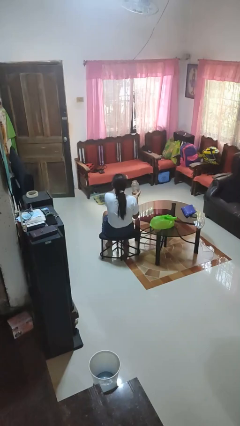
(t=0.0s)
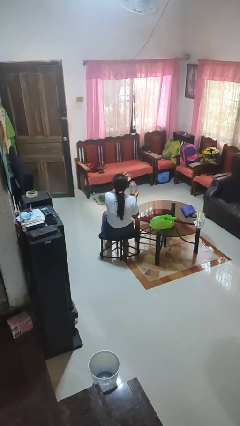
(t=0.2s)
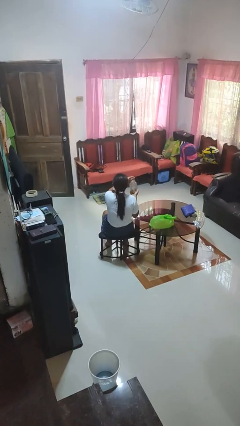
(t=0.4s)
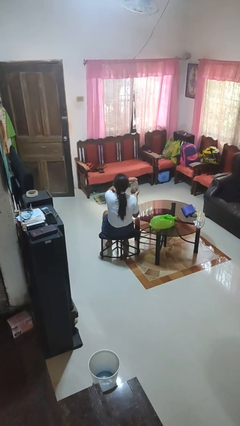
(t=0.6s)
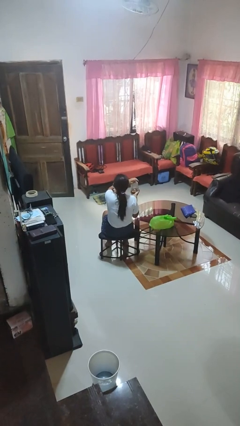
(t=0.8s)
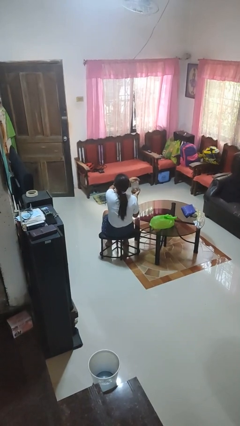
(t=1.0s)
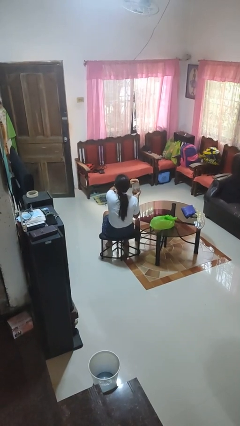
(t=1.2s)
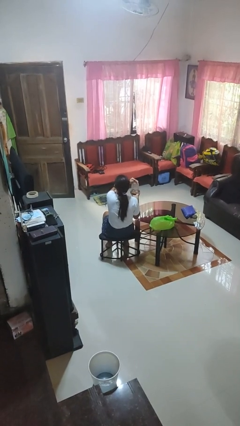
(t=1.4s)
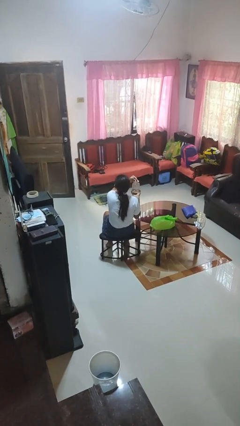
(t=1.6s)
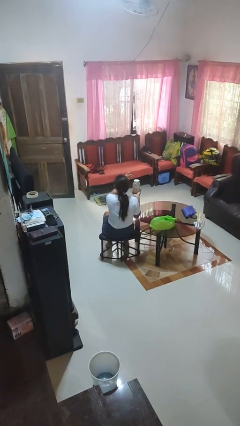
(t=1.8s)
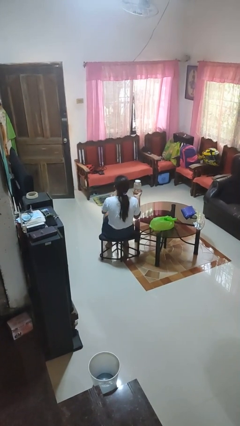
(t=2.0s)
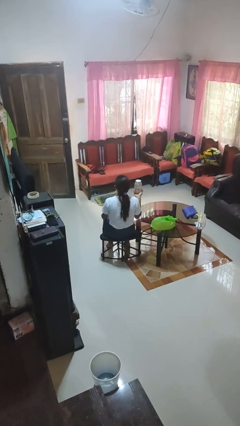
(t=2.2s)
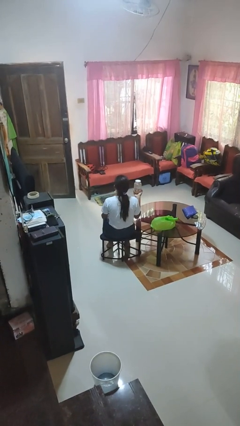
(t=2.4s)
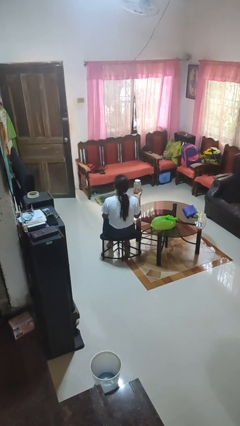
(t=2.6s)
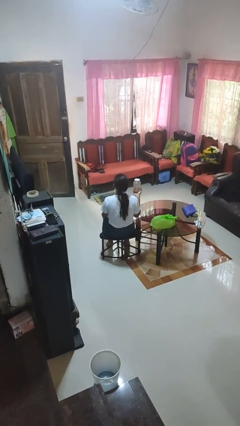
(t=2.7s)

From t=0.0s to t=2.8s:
person closes jar

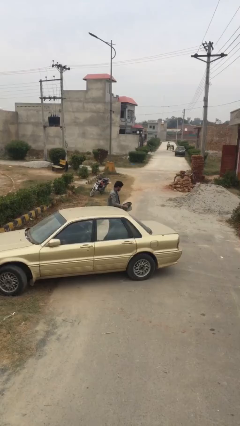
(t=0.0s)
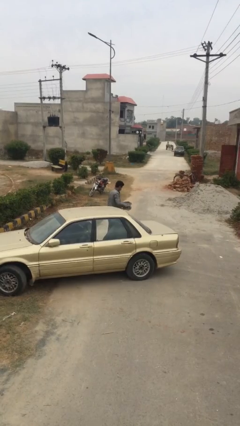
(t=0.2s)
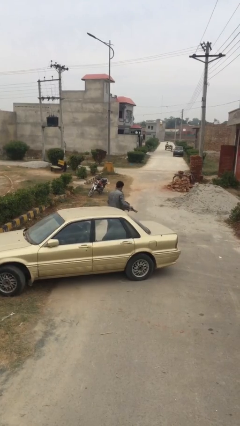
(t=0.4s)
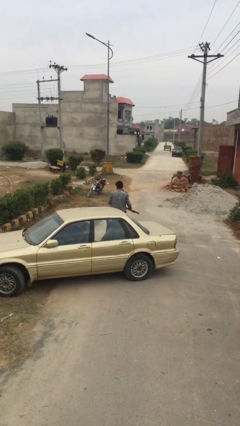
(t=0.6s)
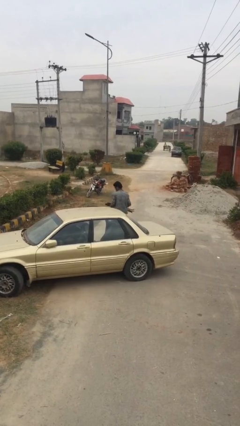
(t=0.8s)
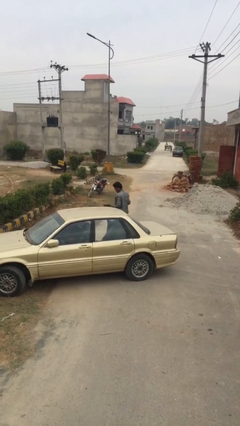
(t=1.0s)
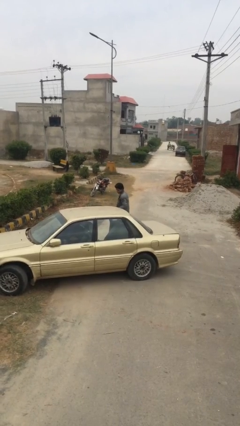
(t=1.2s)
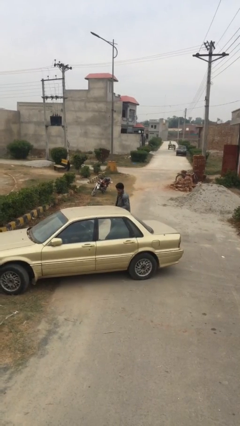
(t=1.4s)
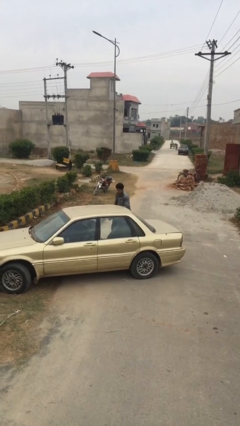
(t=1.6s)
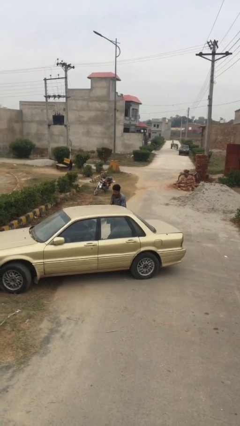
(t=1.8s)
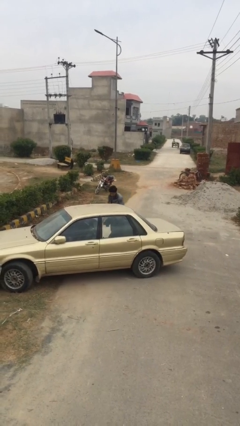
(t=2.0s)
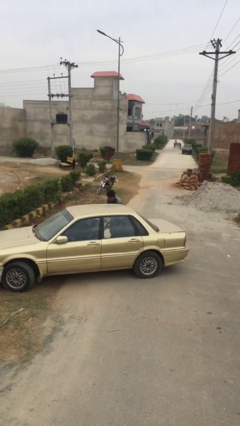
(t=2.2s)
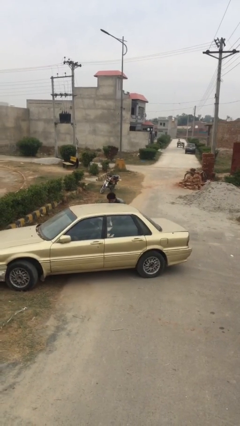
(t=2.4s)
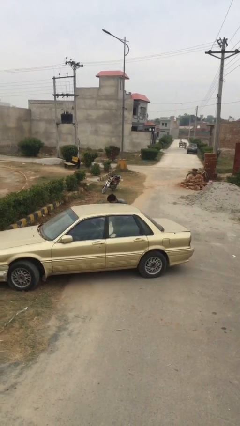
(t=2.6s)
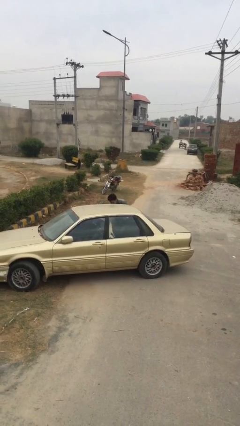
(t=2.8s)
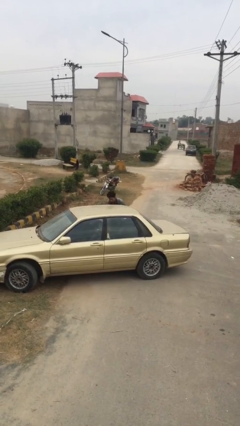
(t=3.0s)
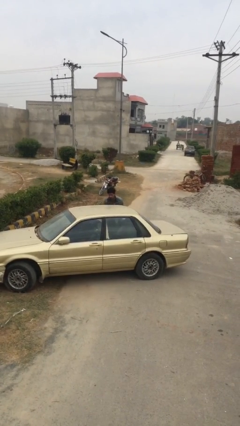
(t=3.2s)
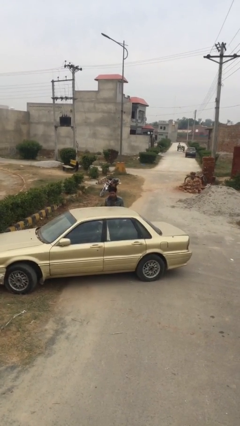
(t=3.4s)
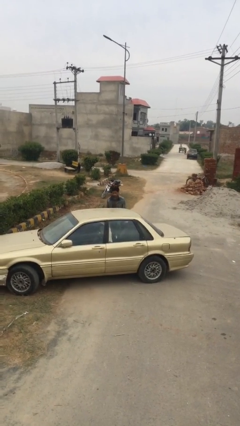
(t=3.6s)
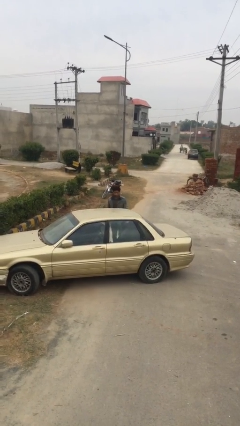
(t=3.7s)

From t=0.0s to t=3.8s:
person loads car

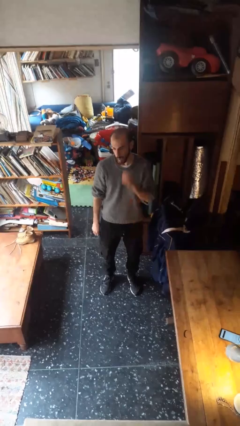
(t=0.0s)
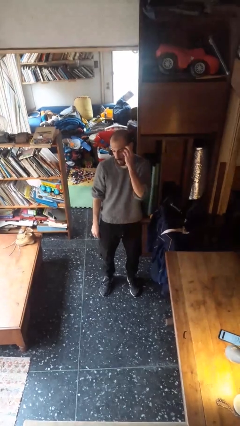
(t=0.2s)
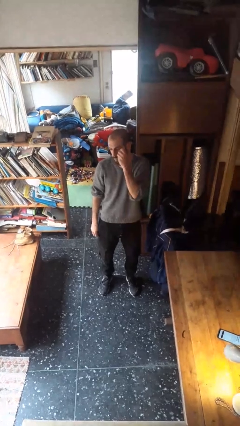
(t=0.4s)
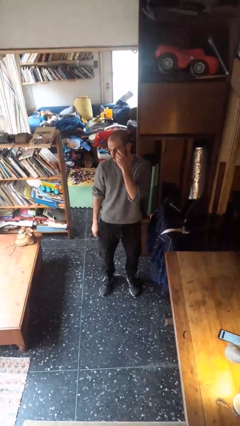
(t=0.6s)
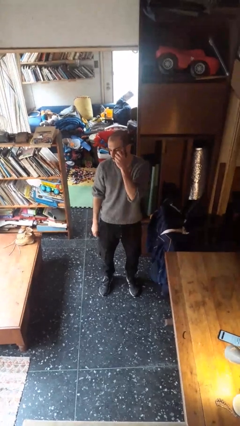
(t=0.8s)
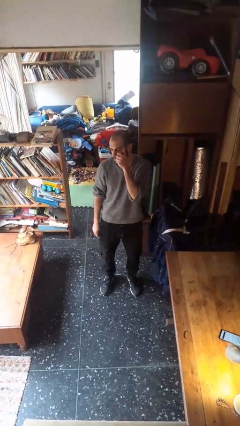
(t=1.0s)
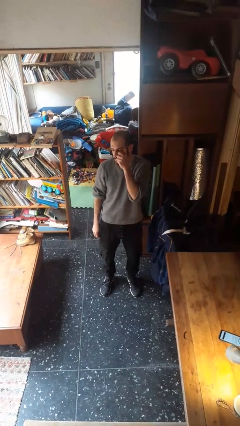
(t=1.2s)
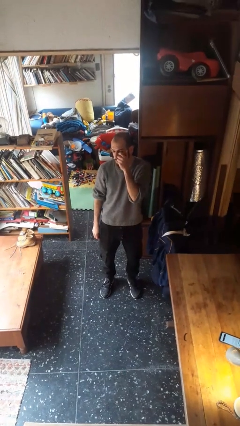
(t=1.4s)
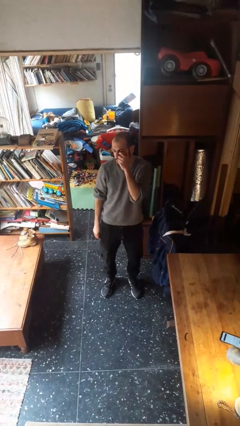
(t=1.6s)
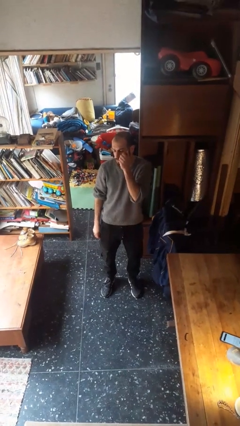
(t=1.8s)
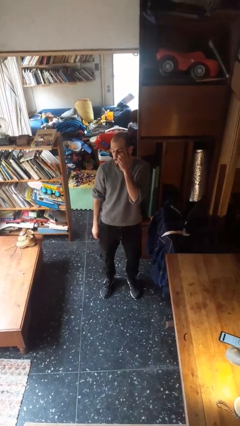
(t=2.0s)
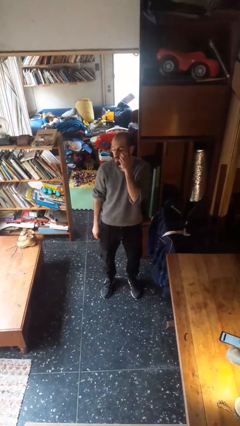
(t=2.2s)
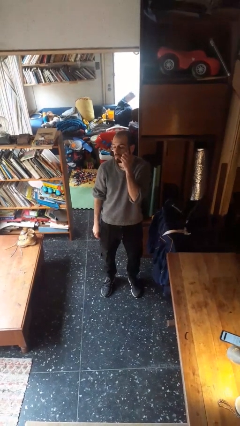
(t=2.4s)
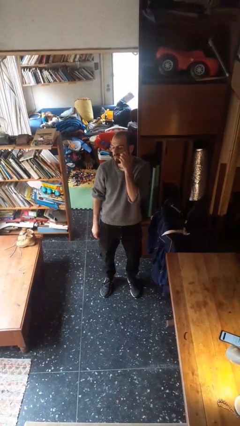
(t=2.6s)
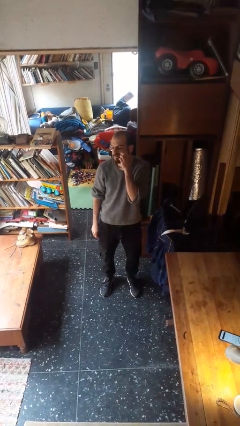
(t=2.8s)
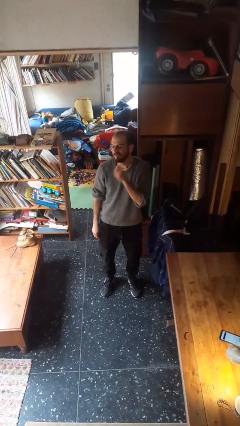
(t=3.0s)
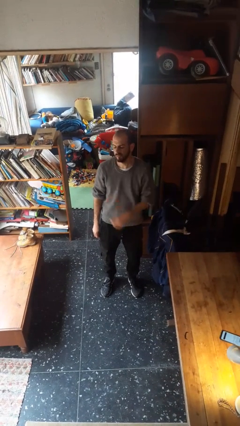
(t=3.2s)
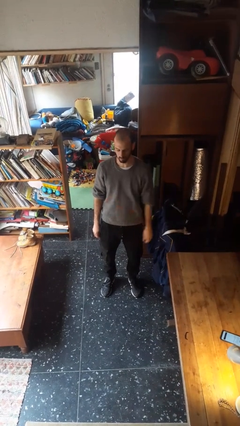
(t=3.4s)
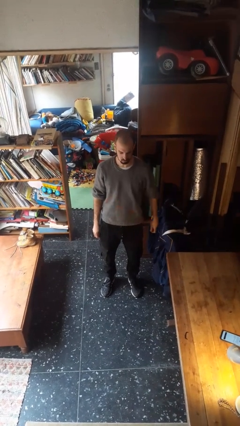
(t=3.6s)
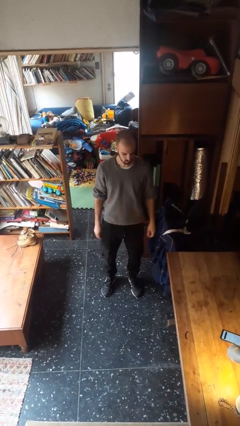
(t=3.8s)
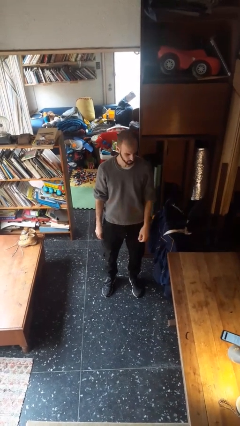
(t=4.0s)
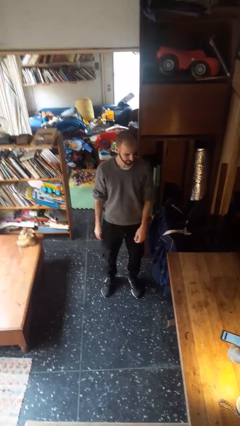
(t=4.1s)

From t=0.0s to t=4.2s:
person scratches face

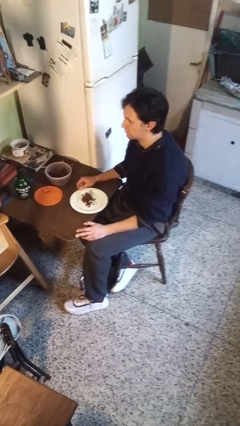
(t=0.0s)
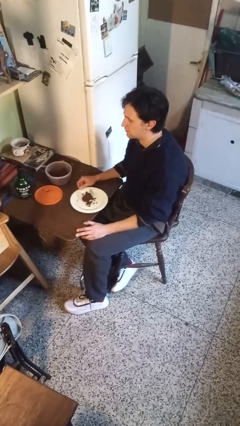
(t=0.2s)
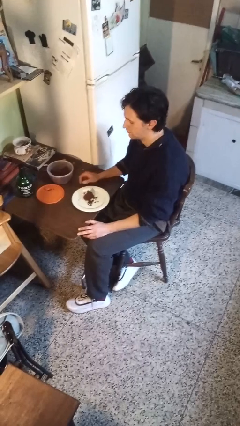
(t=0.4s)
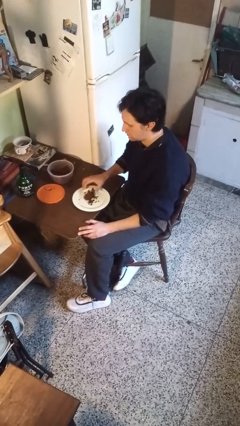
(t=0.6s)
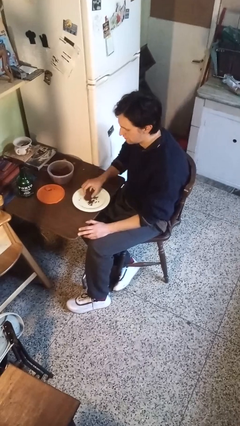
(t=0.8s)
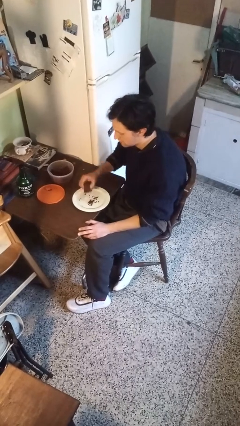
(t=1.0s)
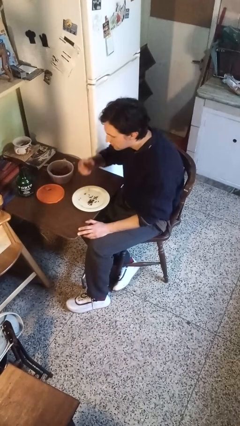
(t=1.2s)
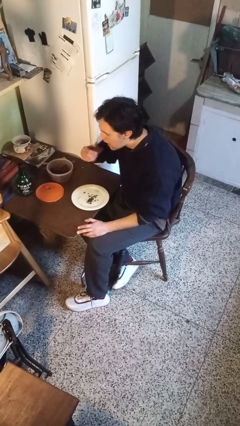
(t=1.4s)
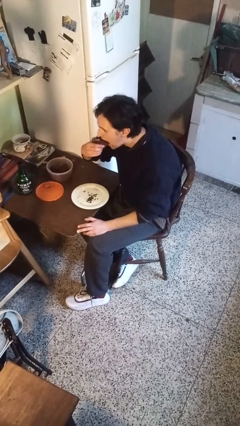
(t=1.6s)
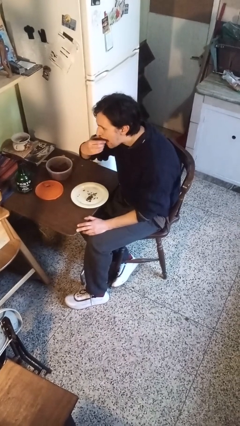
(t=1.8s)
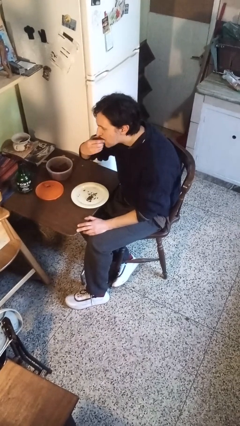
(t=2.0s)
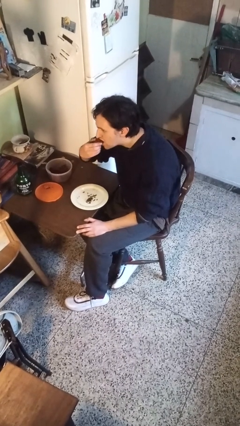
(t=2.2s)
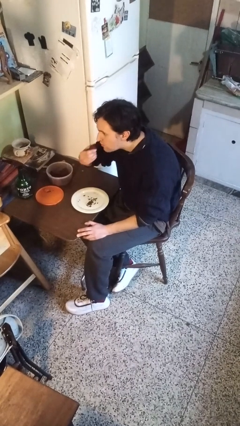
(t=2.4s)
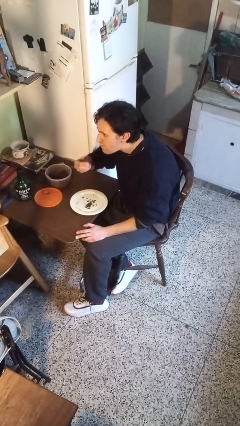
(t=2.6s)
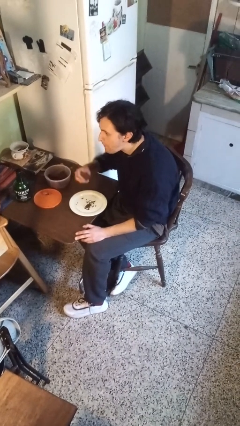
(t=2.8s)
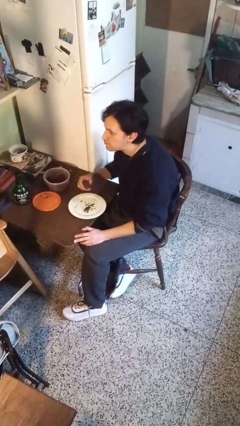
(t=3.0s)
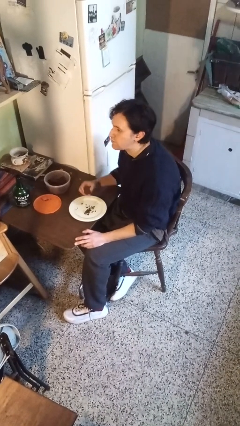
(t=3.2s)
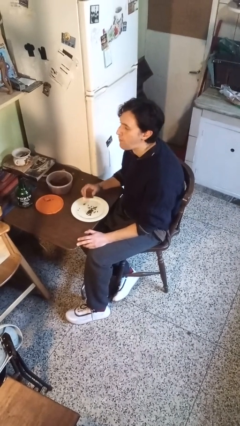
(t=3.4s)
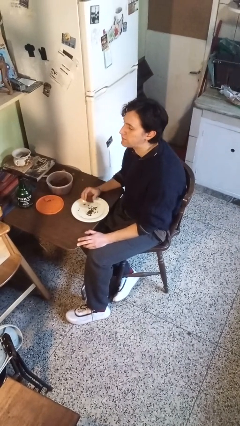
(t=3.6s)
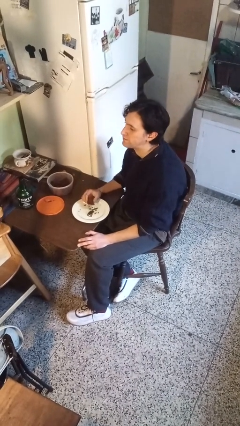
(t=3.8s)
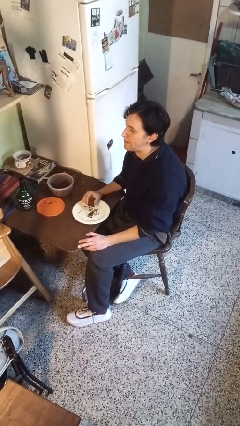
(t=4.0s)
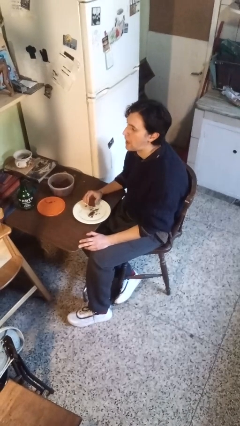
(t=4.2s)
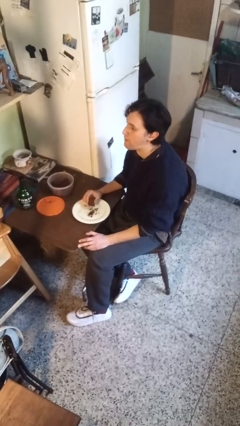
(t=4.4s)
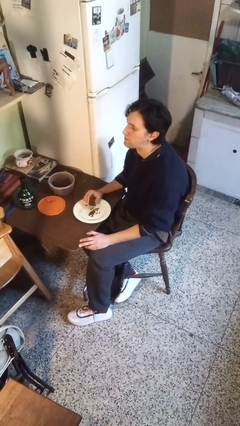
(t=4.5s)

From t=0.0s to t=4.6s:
person eats with hands

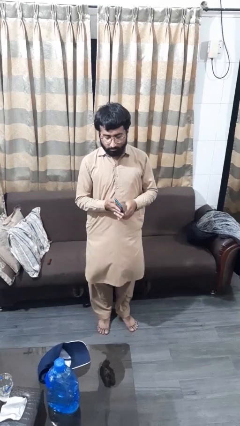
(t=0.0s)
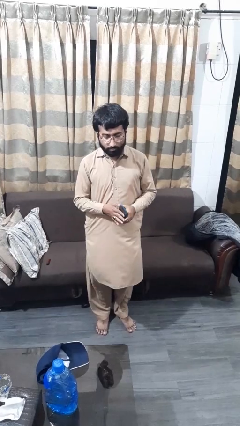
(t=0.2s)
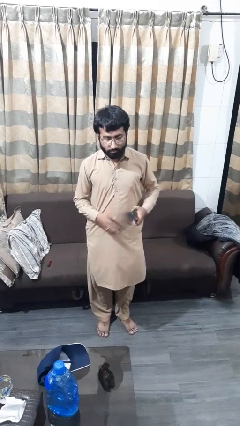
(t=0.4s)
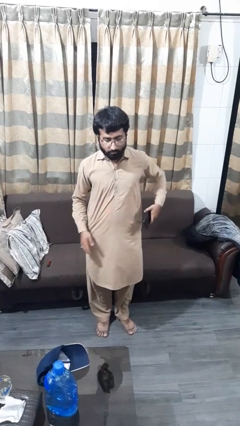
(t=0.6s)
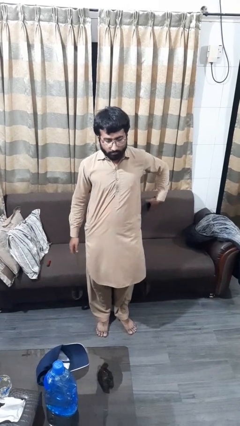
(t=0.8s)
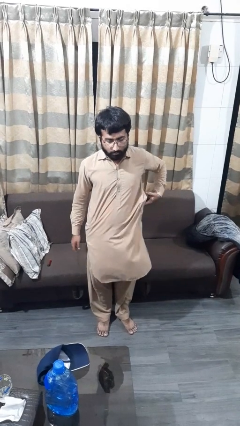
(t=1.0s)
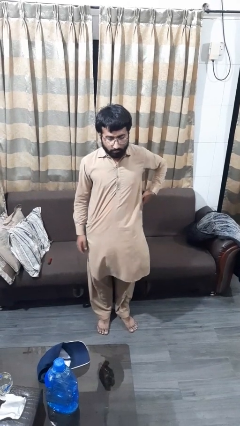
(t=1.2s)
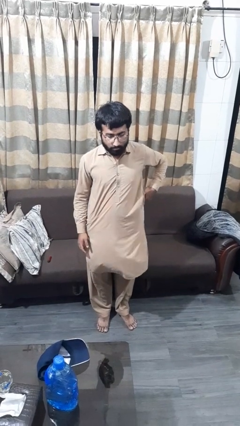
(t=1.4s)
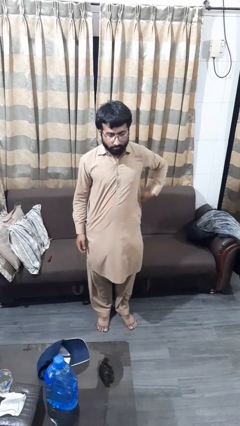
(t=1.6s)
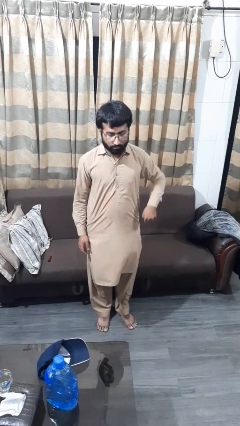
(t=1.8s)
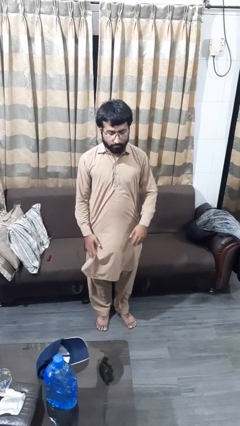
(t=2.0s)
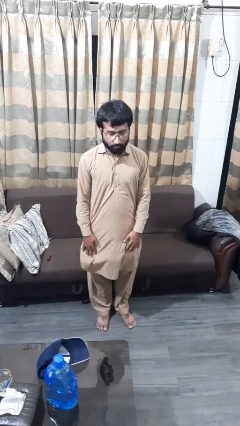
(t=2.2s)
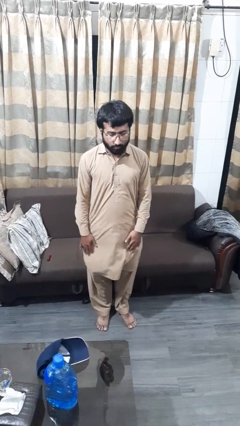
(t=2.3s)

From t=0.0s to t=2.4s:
person puts phone into pocket
